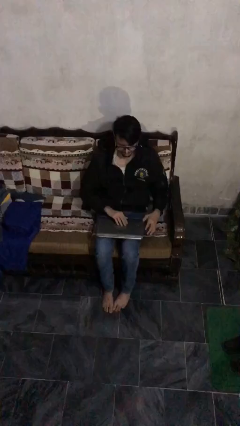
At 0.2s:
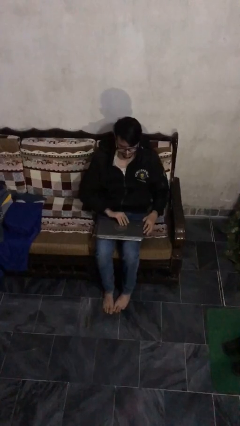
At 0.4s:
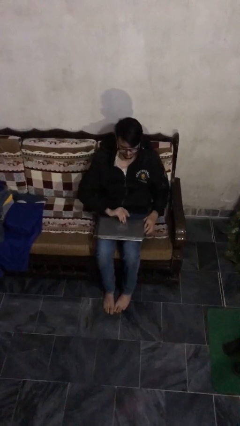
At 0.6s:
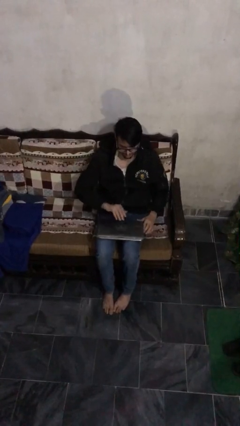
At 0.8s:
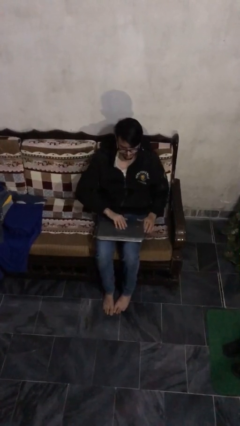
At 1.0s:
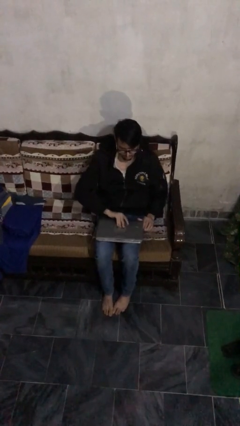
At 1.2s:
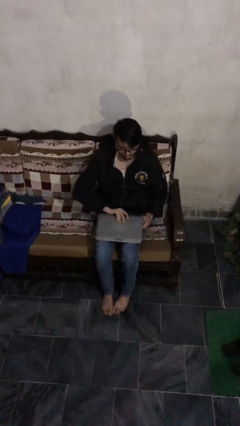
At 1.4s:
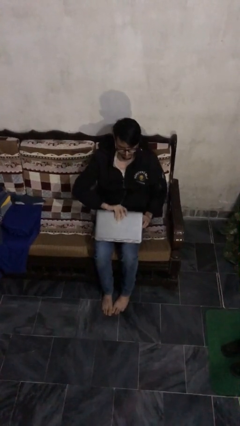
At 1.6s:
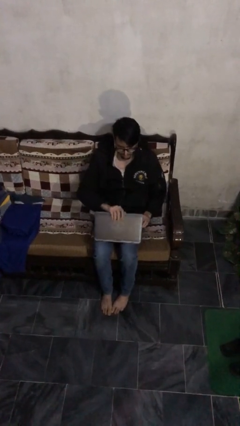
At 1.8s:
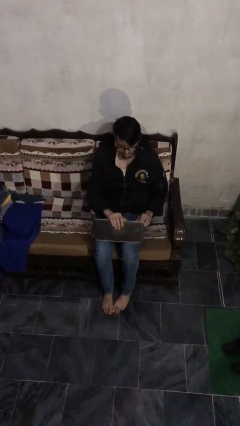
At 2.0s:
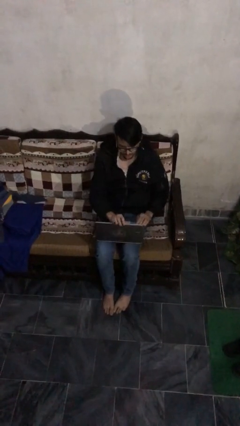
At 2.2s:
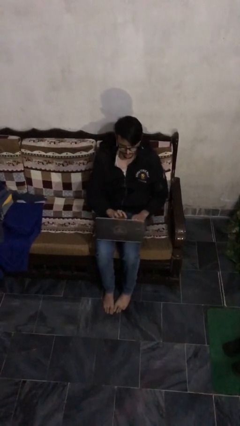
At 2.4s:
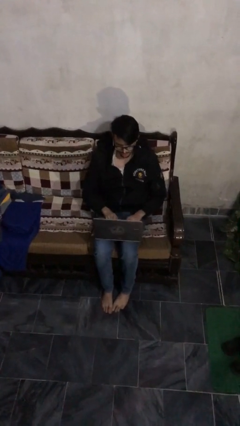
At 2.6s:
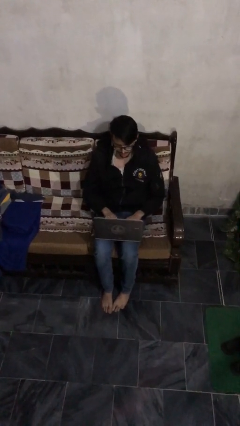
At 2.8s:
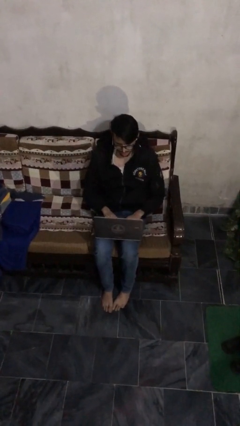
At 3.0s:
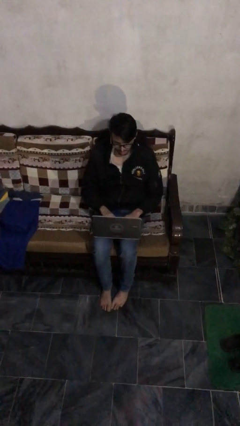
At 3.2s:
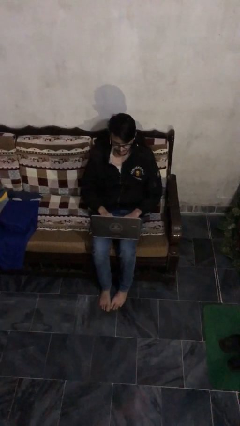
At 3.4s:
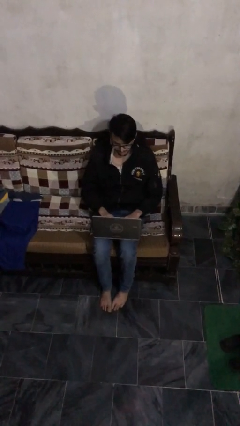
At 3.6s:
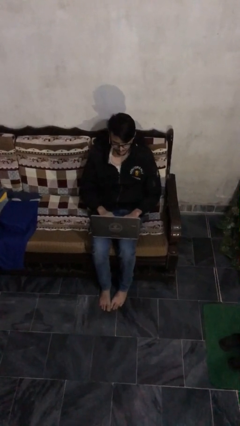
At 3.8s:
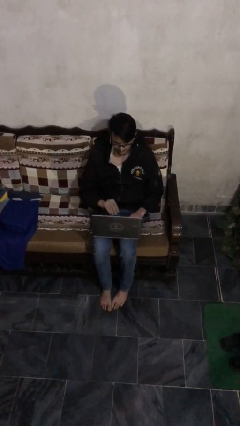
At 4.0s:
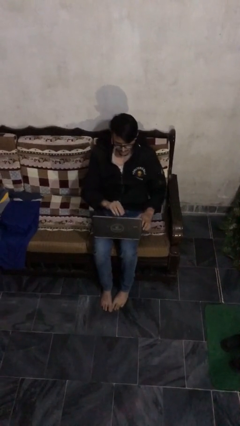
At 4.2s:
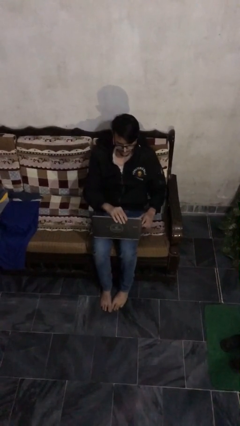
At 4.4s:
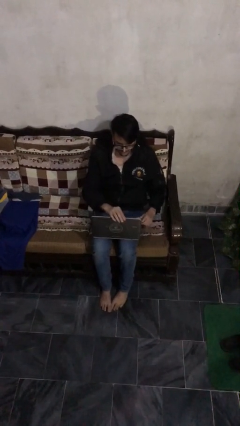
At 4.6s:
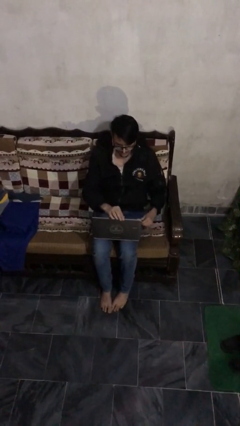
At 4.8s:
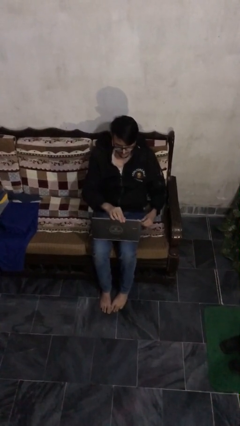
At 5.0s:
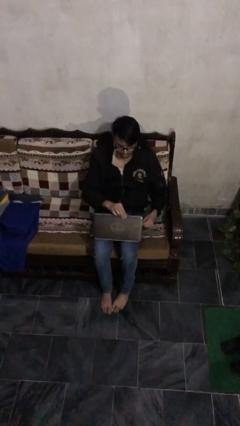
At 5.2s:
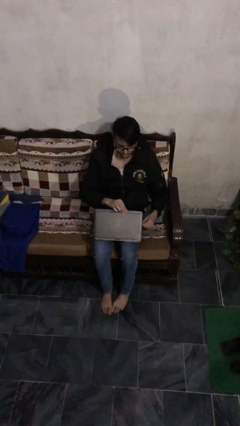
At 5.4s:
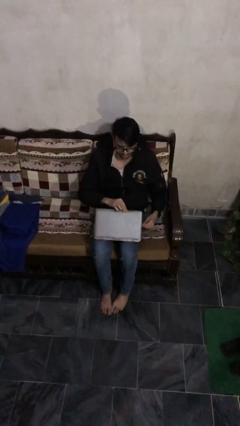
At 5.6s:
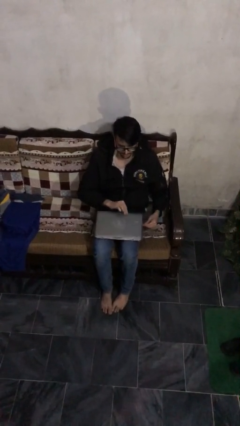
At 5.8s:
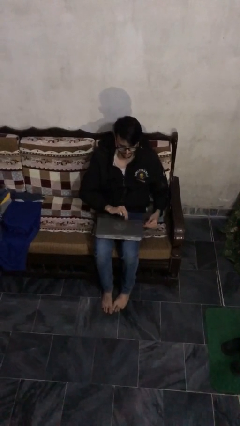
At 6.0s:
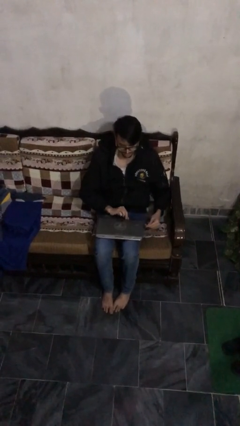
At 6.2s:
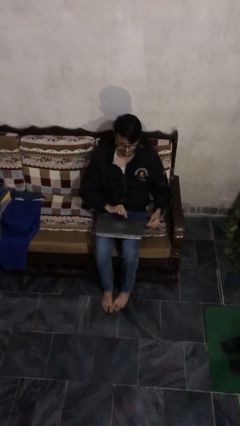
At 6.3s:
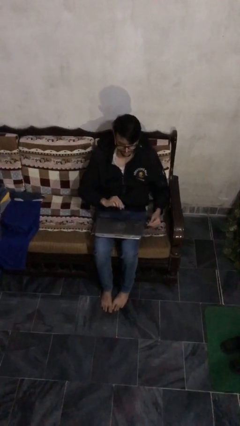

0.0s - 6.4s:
person interacts with laptop

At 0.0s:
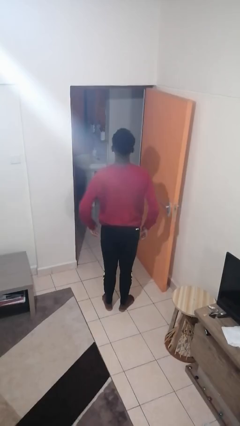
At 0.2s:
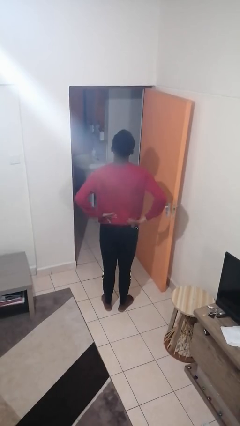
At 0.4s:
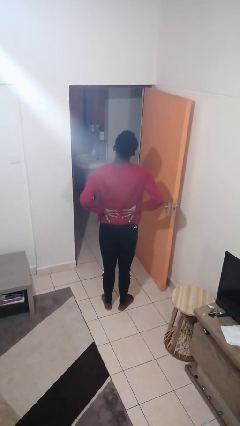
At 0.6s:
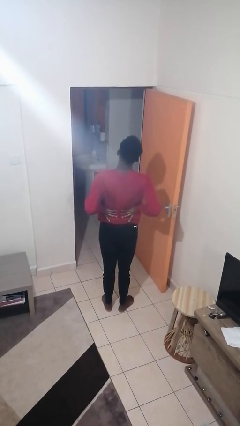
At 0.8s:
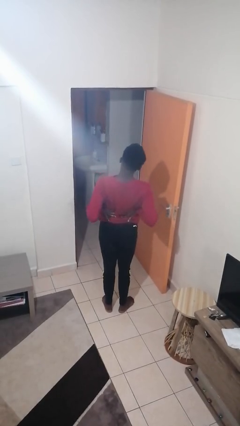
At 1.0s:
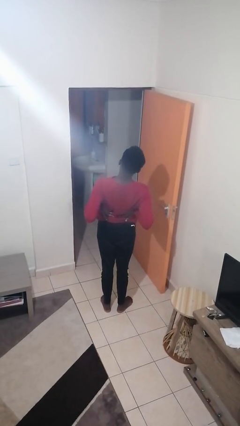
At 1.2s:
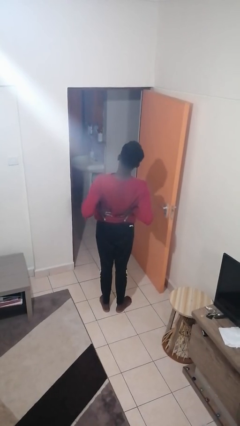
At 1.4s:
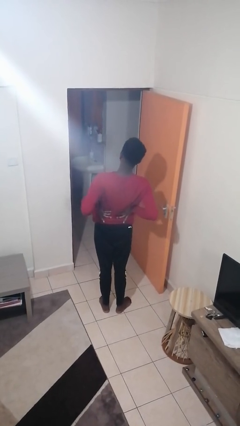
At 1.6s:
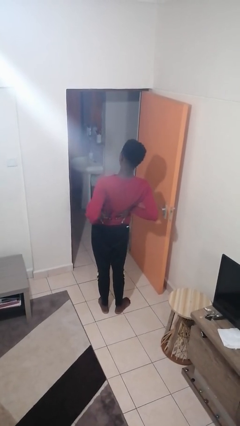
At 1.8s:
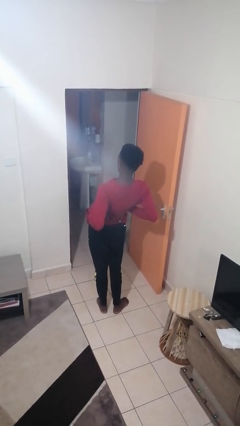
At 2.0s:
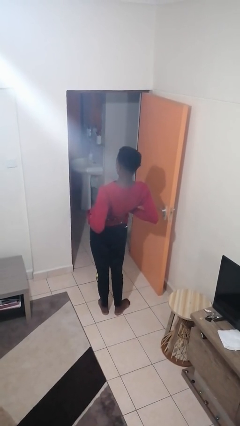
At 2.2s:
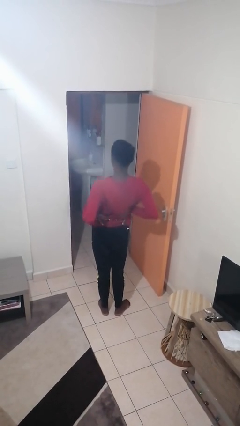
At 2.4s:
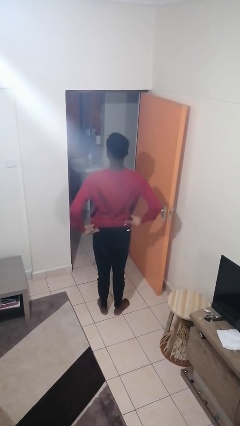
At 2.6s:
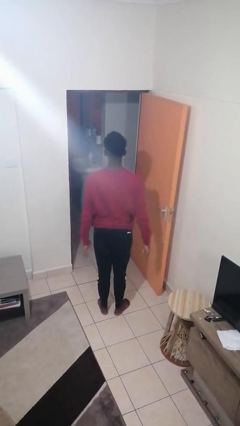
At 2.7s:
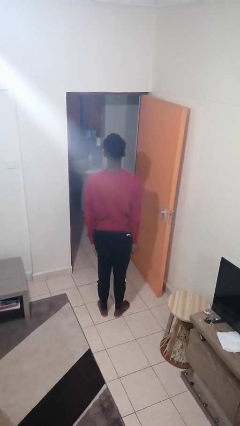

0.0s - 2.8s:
person stretches back

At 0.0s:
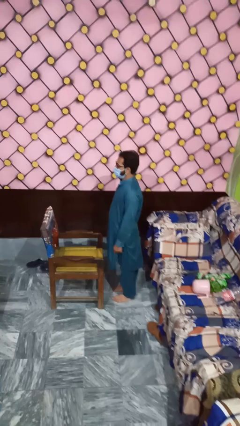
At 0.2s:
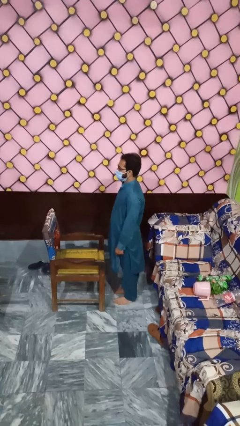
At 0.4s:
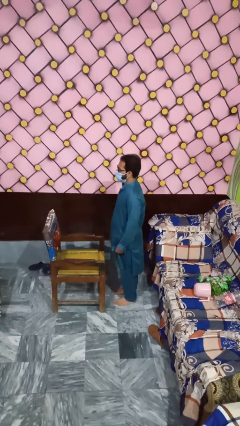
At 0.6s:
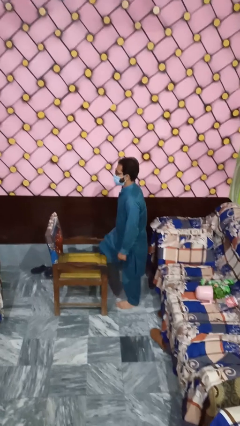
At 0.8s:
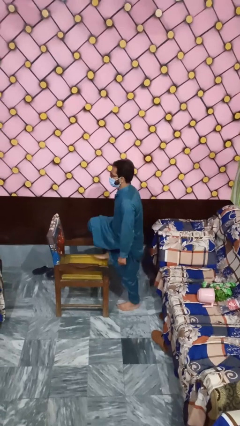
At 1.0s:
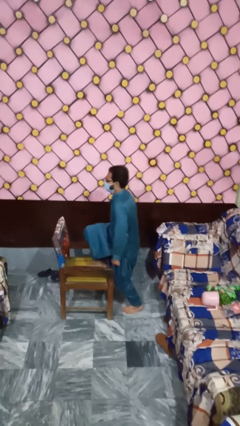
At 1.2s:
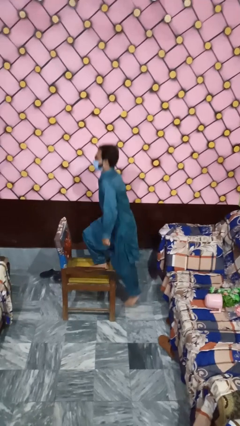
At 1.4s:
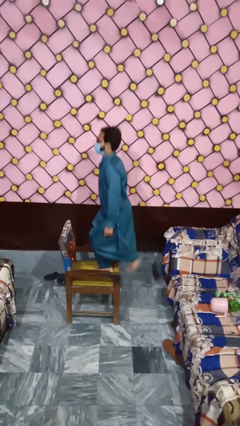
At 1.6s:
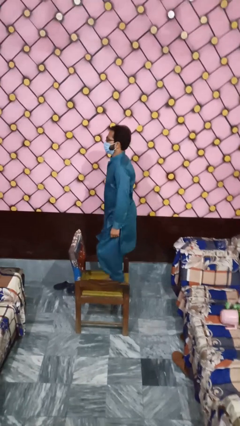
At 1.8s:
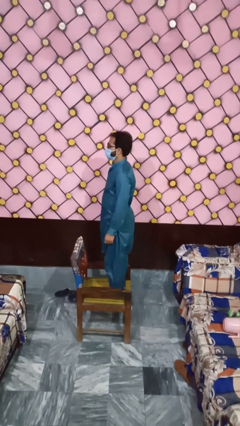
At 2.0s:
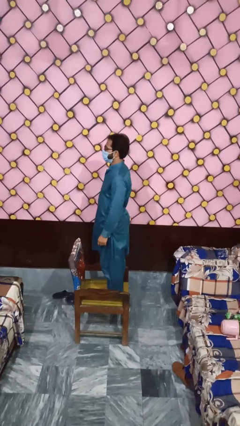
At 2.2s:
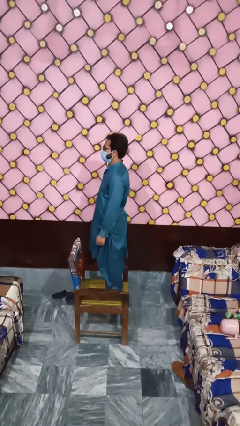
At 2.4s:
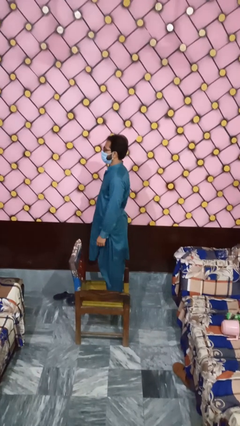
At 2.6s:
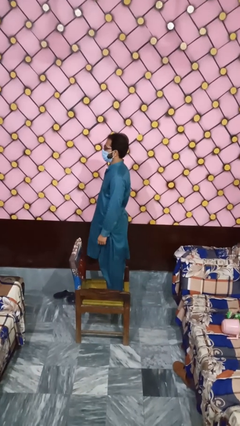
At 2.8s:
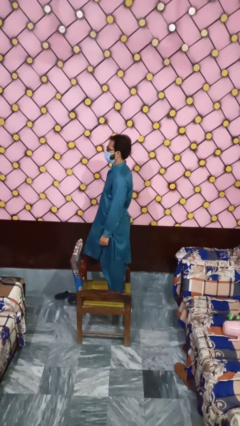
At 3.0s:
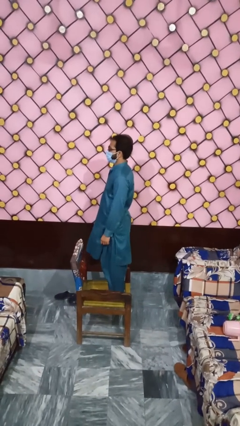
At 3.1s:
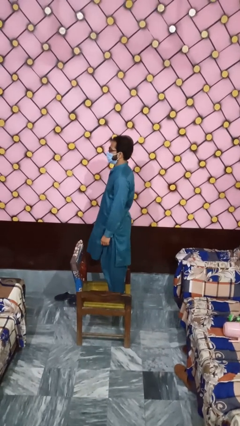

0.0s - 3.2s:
person climbs on chair

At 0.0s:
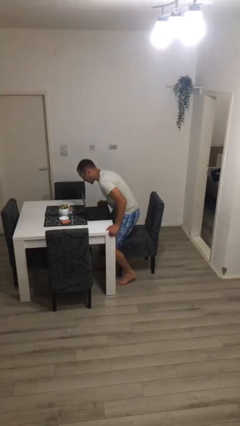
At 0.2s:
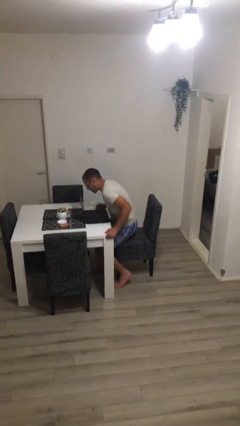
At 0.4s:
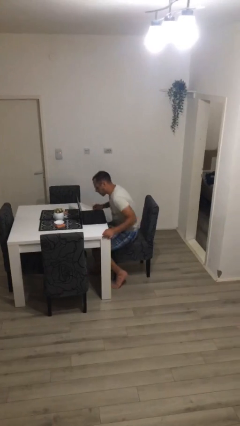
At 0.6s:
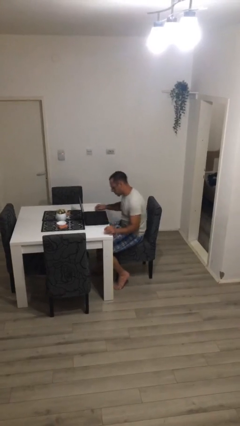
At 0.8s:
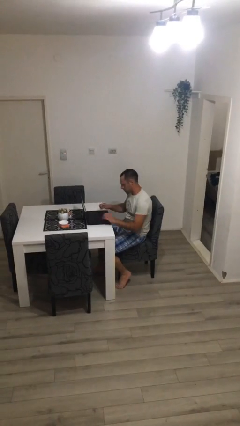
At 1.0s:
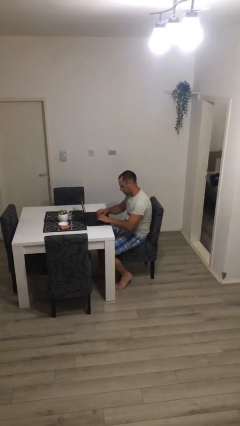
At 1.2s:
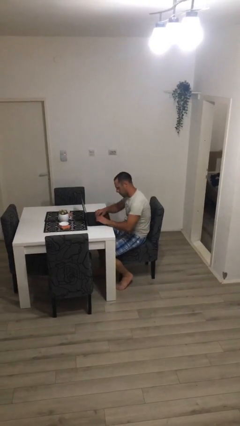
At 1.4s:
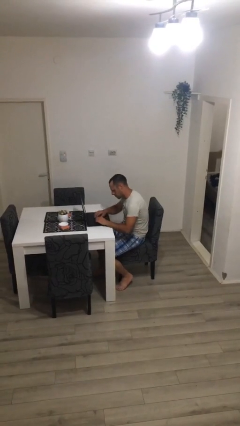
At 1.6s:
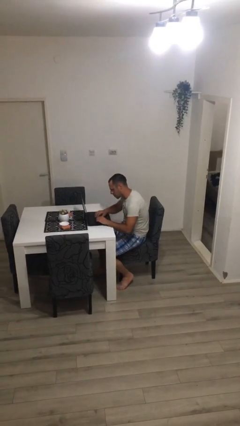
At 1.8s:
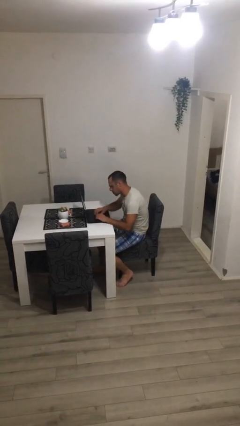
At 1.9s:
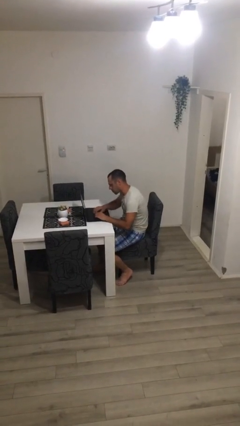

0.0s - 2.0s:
person sits down

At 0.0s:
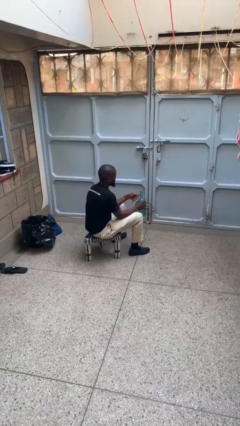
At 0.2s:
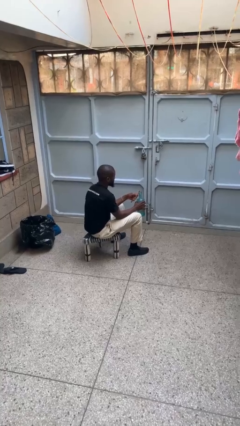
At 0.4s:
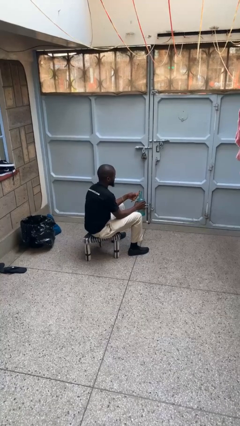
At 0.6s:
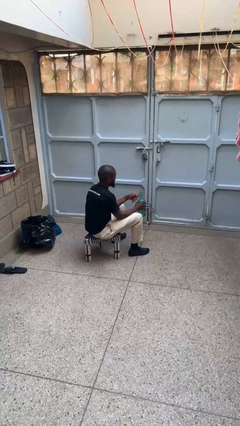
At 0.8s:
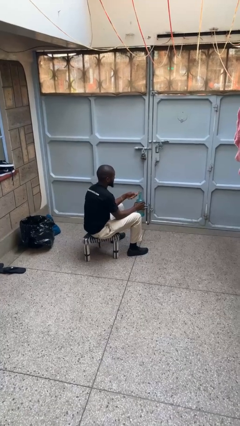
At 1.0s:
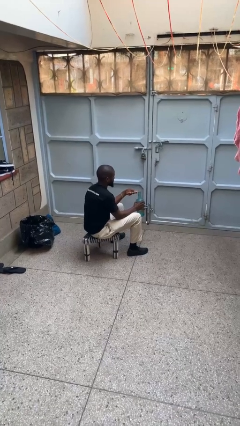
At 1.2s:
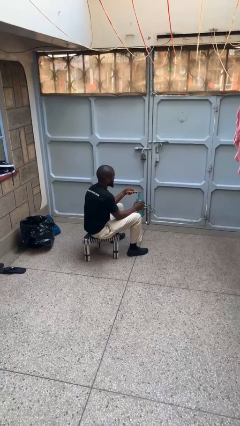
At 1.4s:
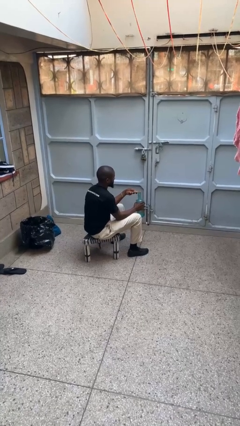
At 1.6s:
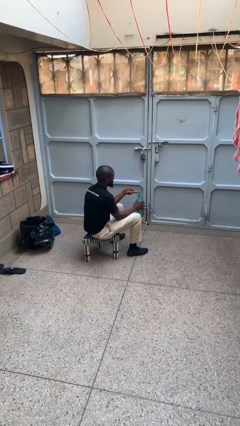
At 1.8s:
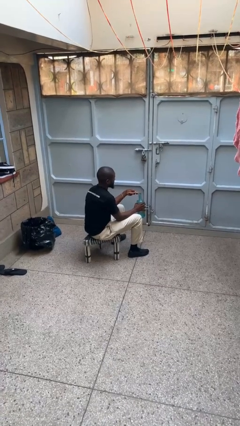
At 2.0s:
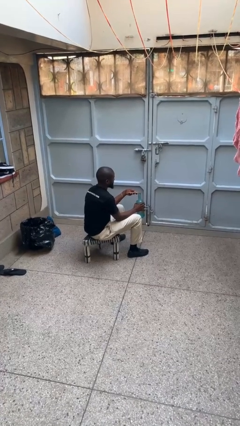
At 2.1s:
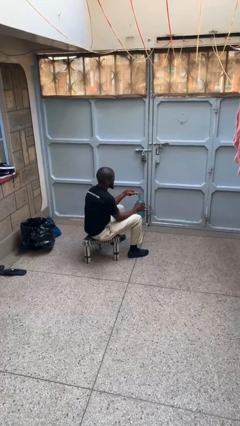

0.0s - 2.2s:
person opens can with can opener

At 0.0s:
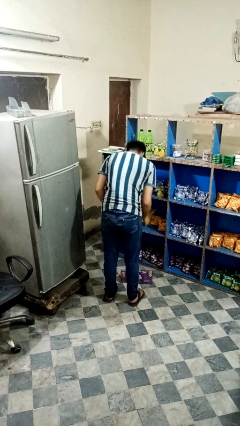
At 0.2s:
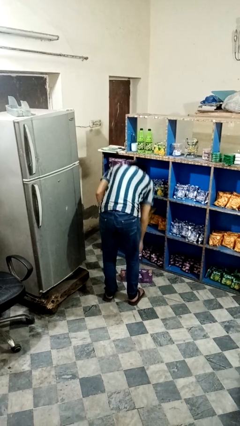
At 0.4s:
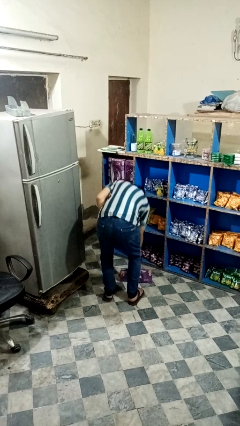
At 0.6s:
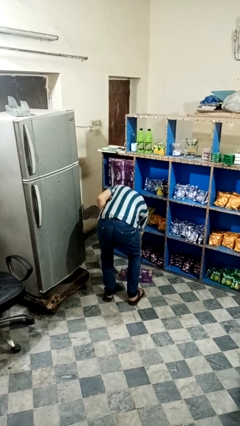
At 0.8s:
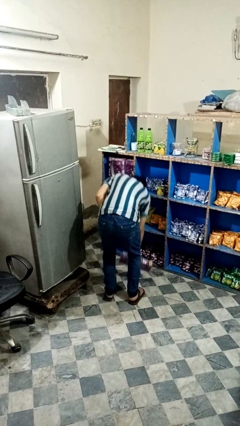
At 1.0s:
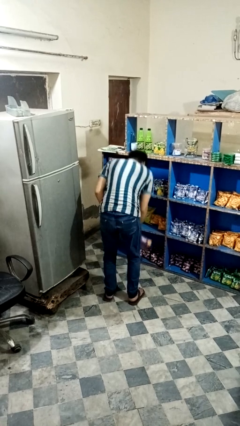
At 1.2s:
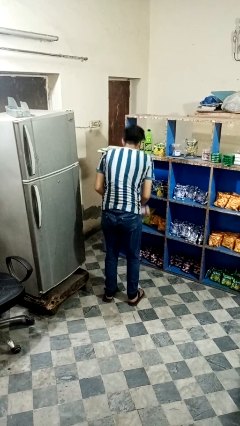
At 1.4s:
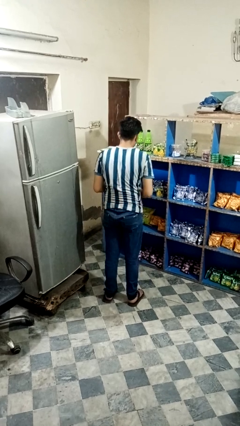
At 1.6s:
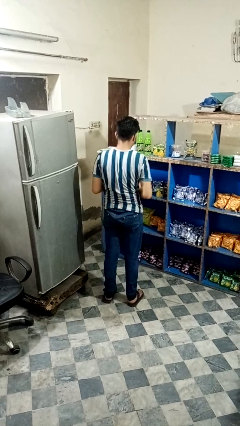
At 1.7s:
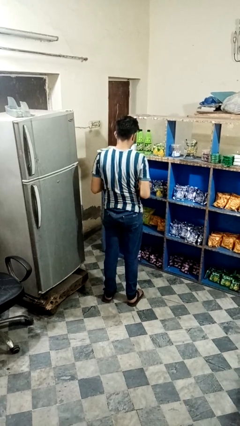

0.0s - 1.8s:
person picks up object from floor
